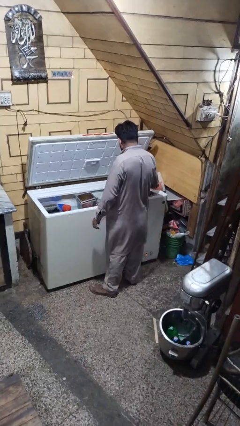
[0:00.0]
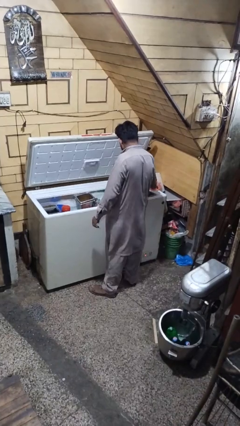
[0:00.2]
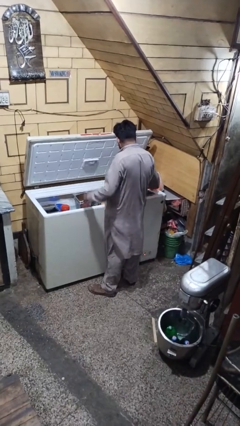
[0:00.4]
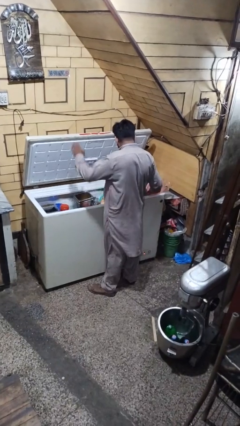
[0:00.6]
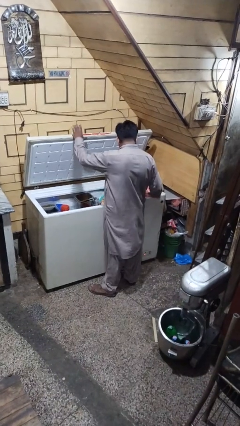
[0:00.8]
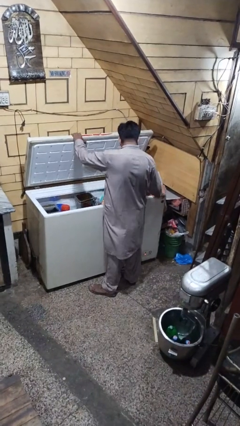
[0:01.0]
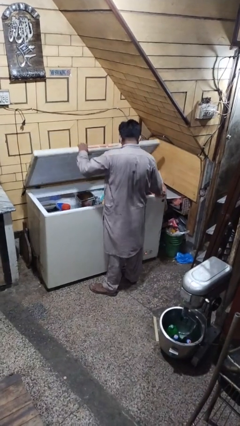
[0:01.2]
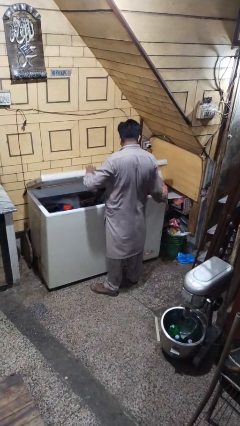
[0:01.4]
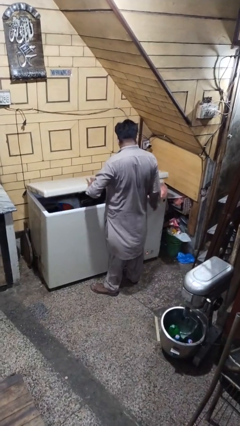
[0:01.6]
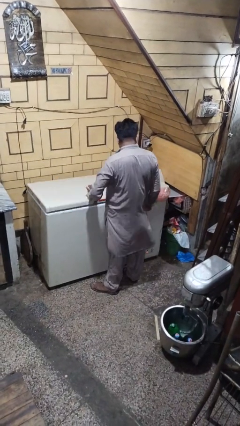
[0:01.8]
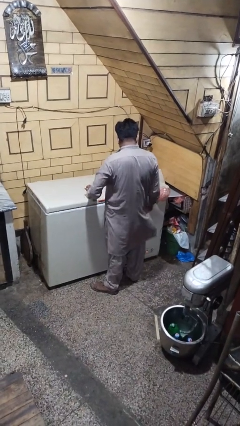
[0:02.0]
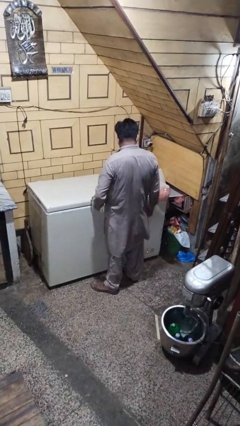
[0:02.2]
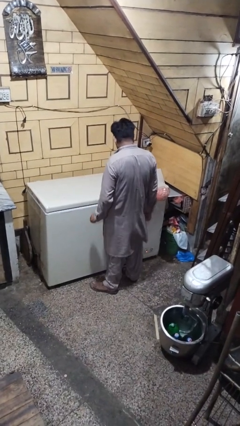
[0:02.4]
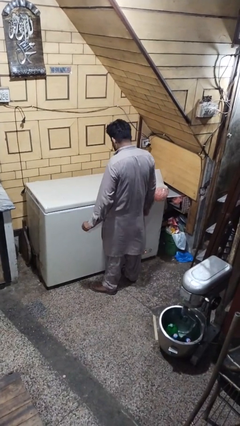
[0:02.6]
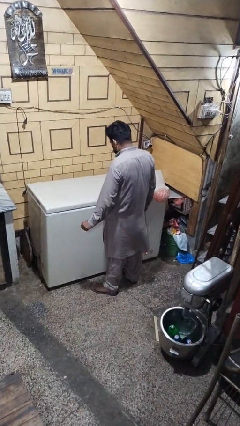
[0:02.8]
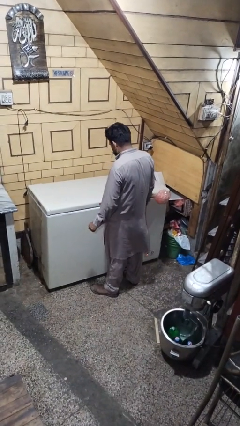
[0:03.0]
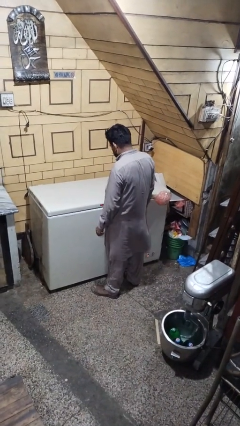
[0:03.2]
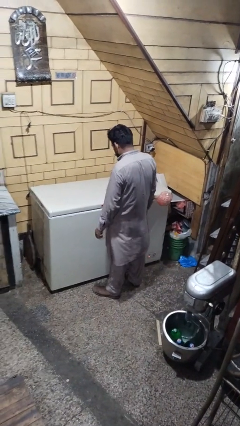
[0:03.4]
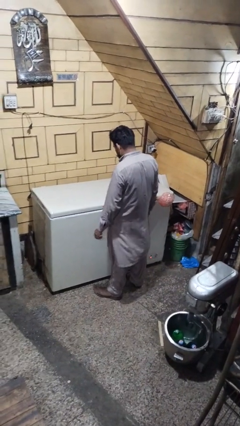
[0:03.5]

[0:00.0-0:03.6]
person closes refrigerator

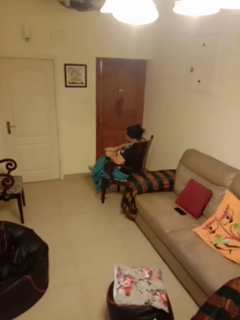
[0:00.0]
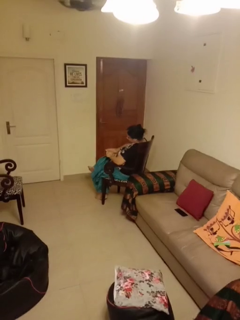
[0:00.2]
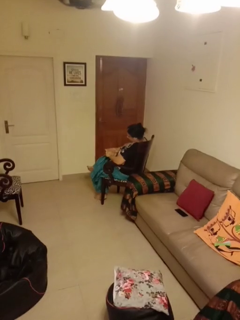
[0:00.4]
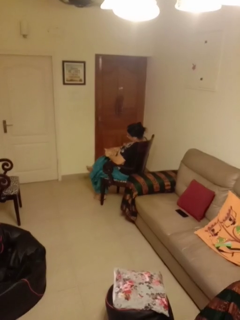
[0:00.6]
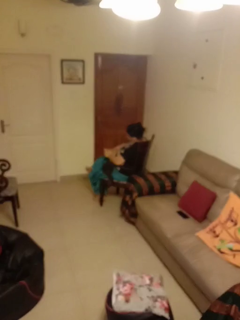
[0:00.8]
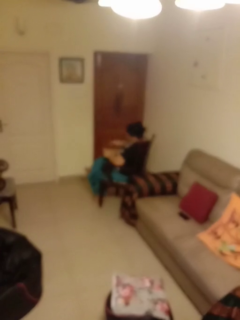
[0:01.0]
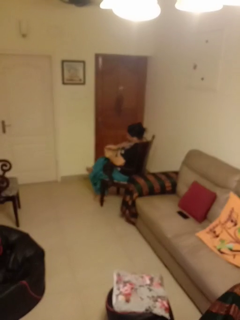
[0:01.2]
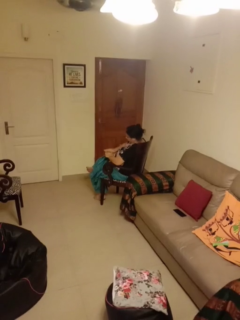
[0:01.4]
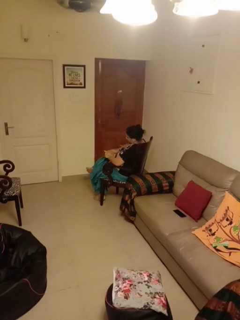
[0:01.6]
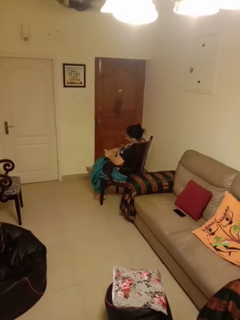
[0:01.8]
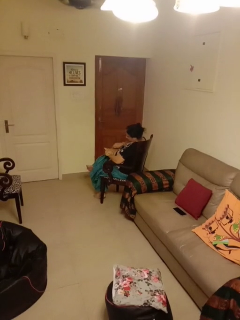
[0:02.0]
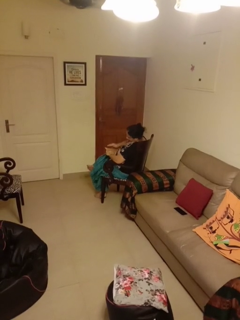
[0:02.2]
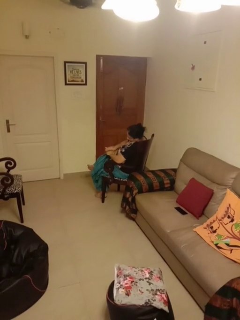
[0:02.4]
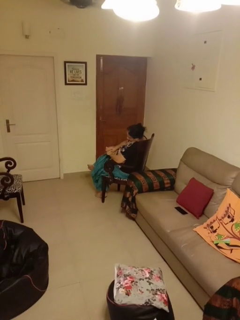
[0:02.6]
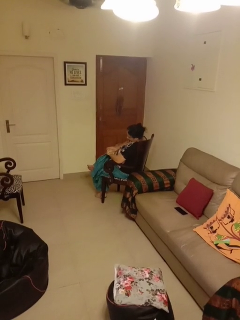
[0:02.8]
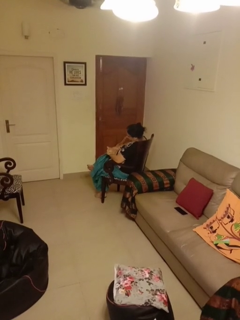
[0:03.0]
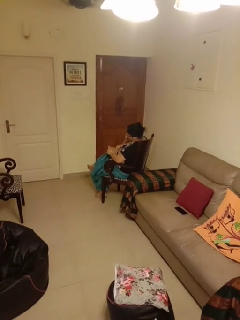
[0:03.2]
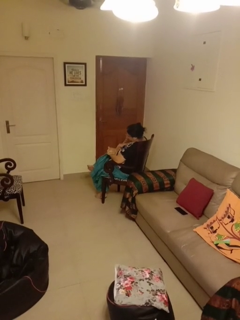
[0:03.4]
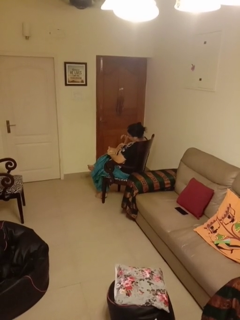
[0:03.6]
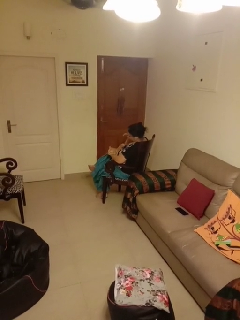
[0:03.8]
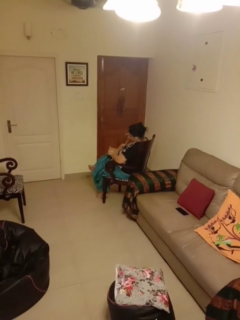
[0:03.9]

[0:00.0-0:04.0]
person pets cat

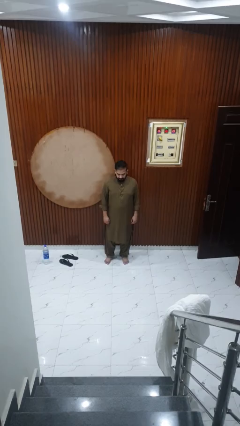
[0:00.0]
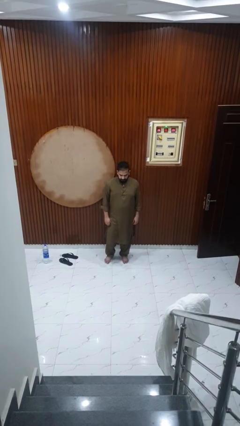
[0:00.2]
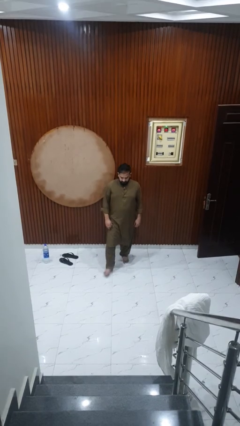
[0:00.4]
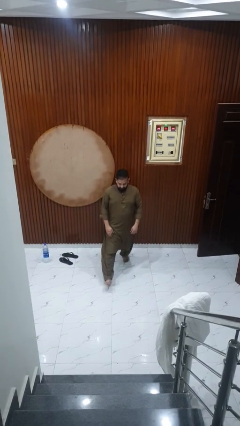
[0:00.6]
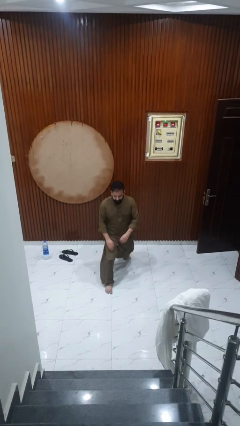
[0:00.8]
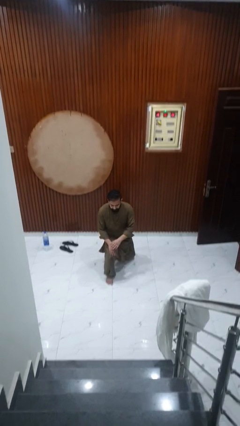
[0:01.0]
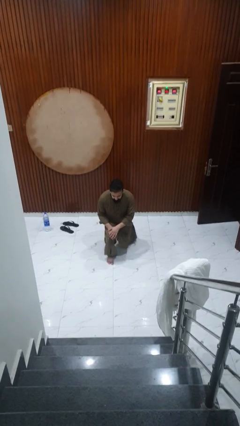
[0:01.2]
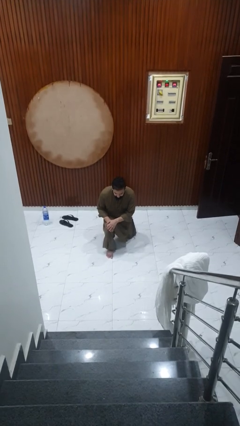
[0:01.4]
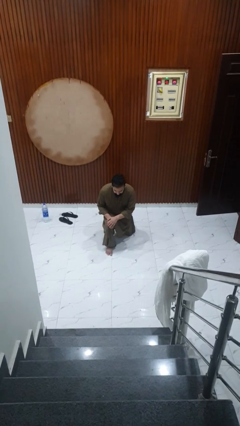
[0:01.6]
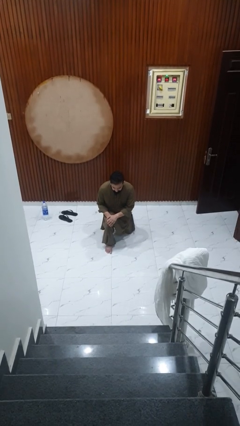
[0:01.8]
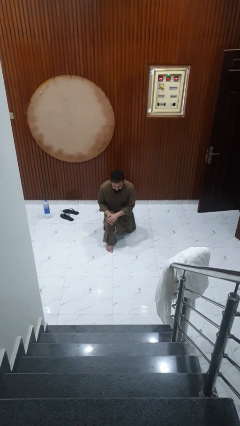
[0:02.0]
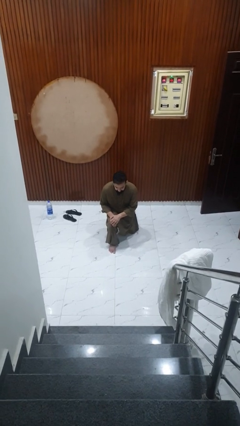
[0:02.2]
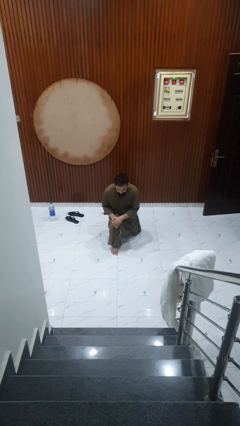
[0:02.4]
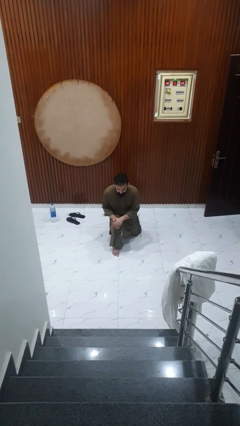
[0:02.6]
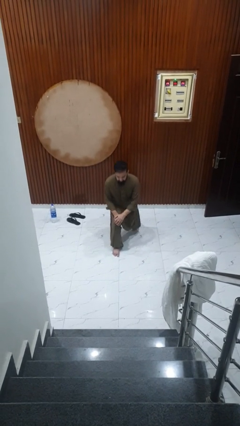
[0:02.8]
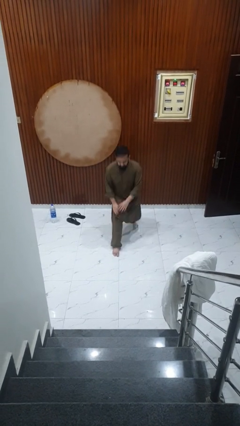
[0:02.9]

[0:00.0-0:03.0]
person exercises with lunges

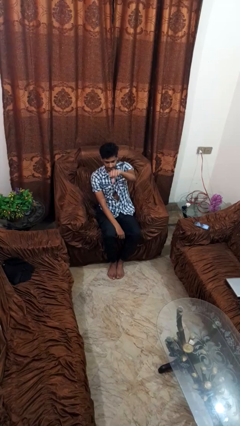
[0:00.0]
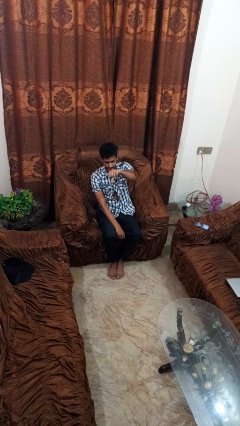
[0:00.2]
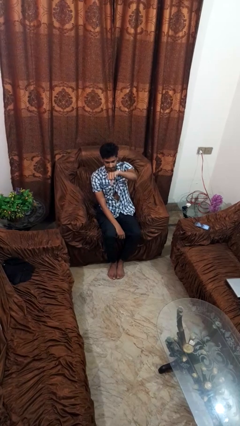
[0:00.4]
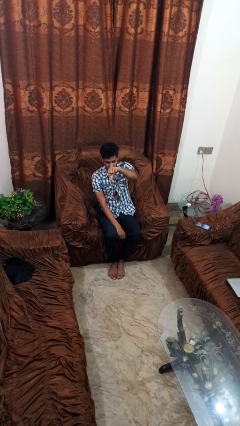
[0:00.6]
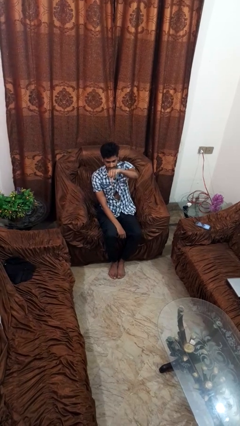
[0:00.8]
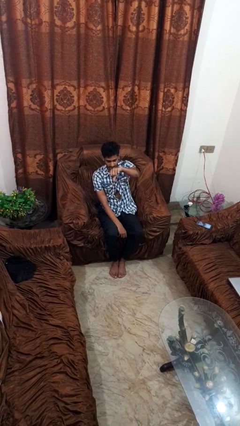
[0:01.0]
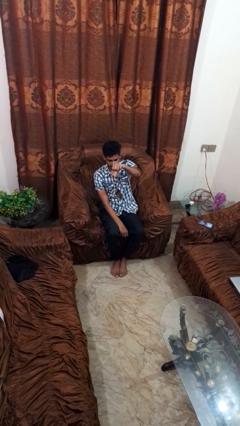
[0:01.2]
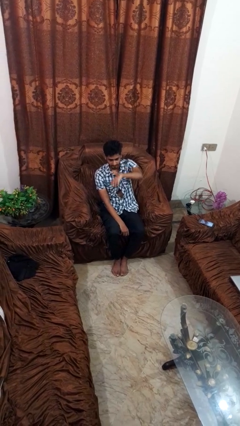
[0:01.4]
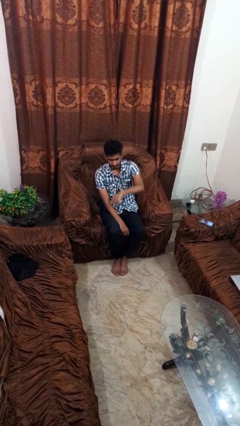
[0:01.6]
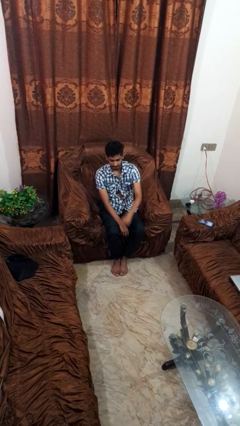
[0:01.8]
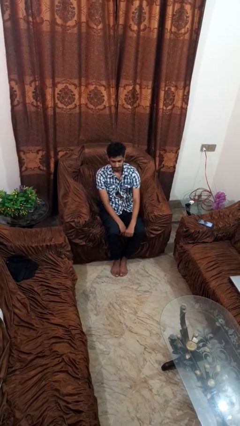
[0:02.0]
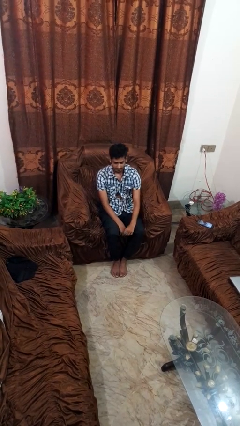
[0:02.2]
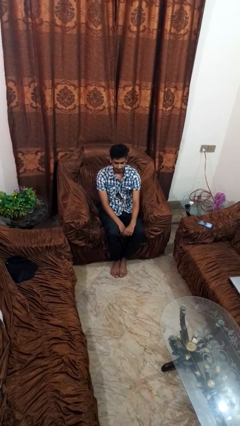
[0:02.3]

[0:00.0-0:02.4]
person gestures thumbs down

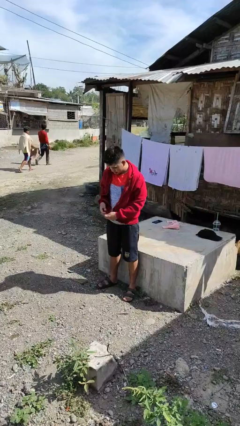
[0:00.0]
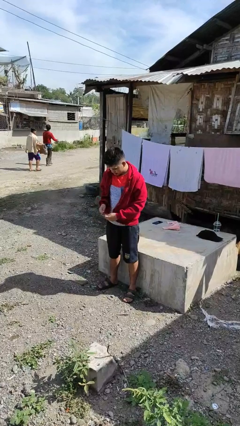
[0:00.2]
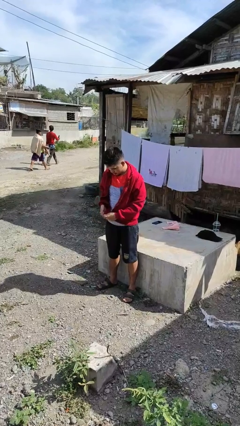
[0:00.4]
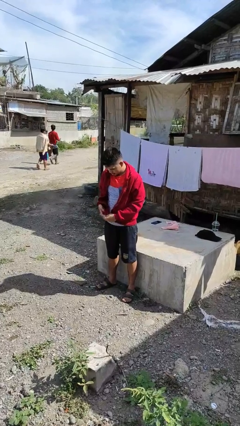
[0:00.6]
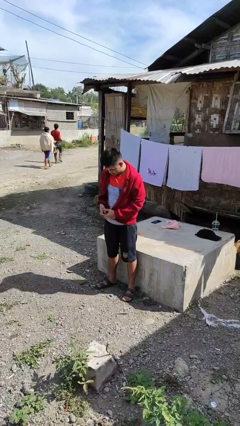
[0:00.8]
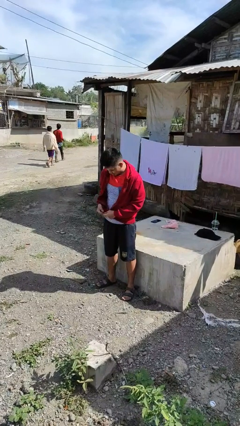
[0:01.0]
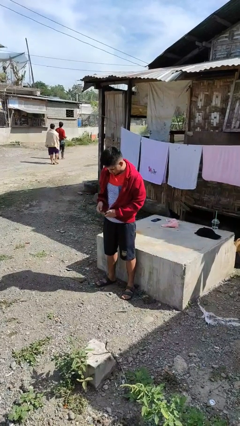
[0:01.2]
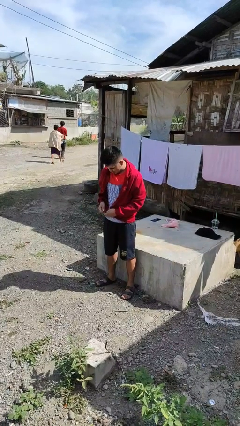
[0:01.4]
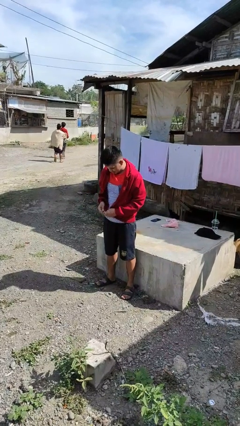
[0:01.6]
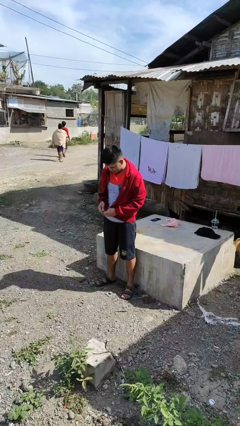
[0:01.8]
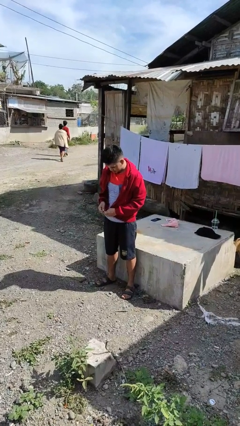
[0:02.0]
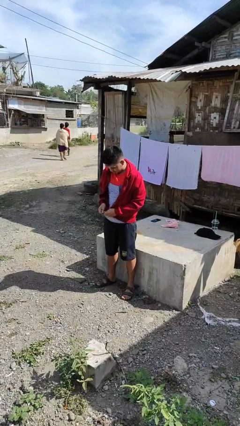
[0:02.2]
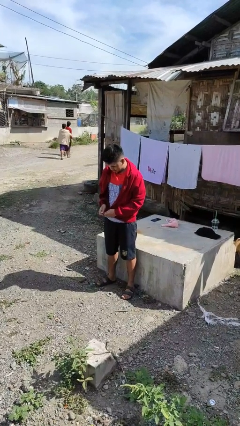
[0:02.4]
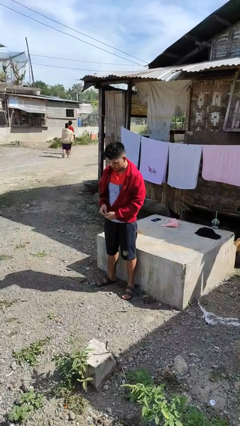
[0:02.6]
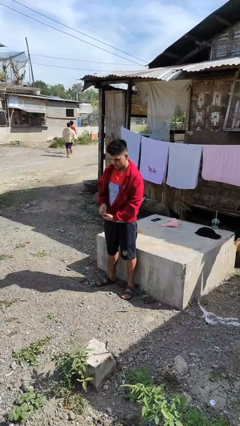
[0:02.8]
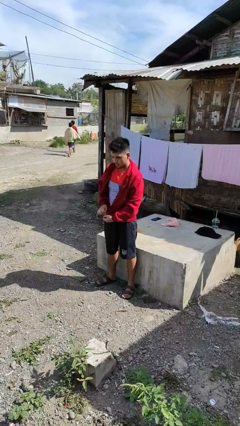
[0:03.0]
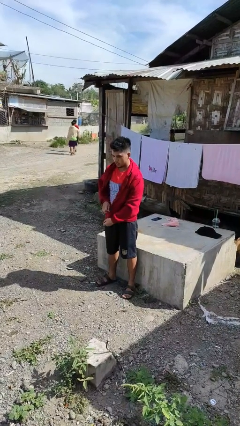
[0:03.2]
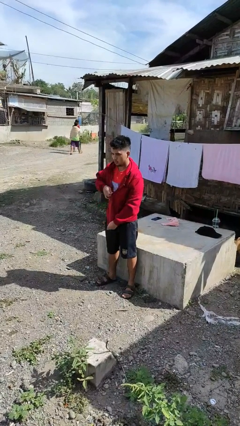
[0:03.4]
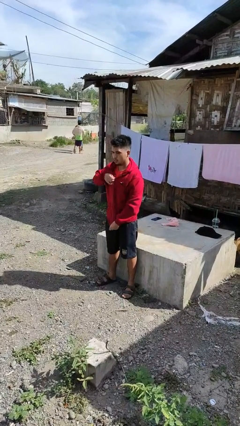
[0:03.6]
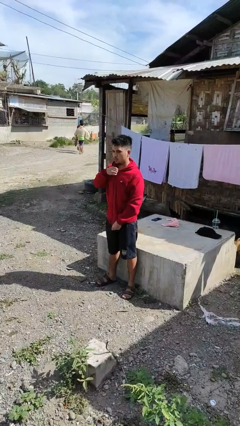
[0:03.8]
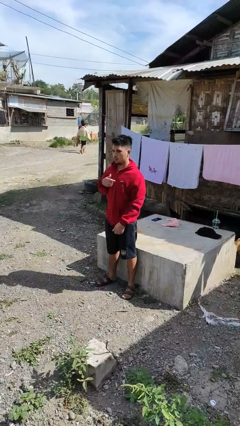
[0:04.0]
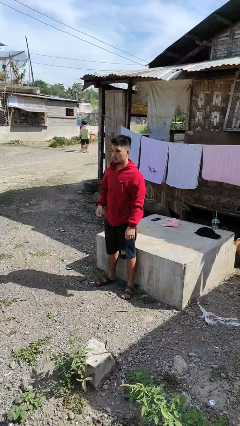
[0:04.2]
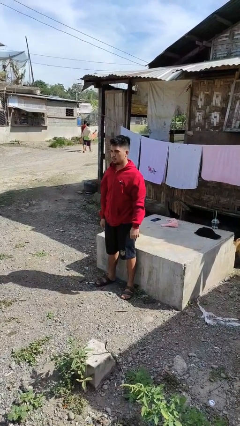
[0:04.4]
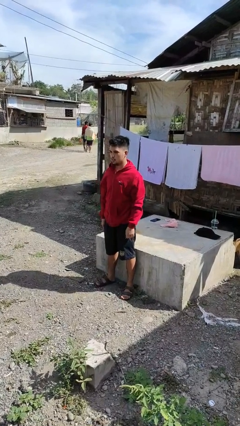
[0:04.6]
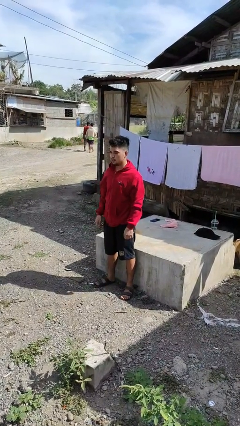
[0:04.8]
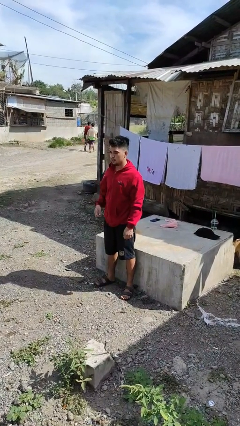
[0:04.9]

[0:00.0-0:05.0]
person zips up jacket

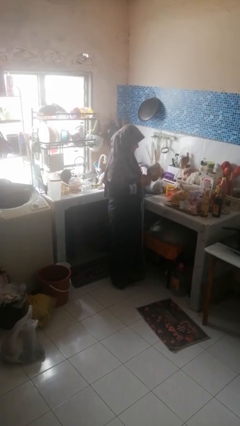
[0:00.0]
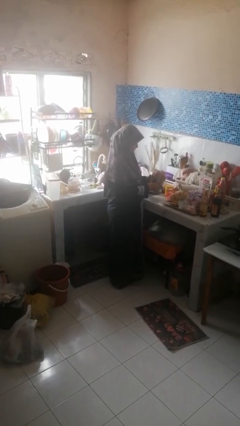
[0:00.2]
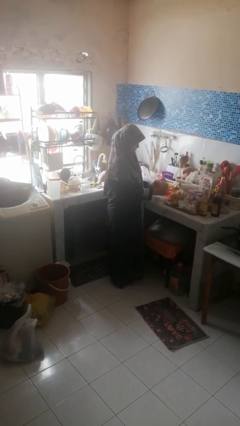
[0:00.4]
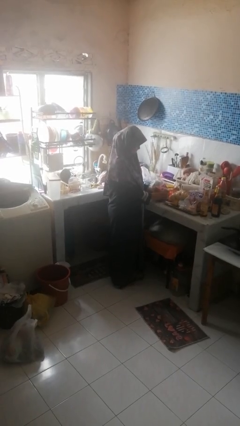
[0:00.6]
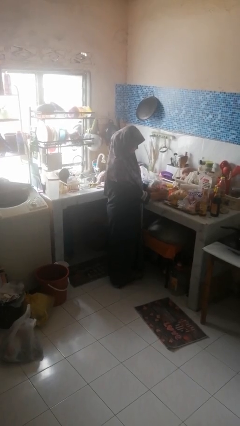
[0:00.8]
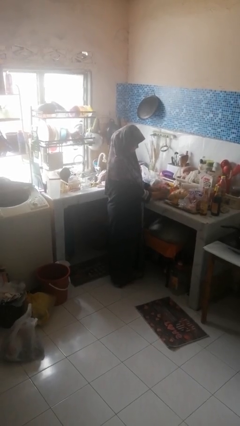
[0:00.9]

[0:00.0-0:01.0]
person puts down object on countertop
